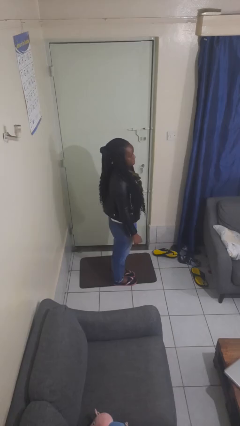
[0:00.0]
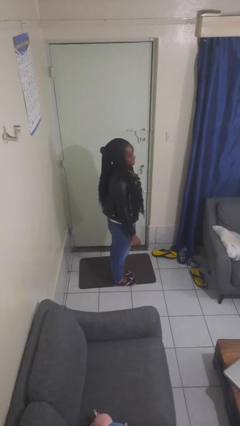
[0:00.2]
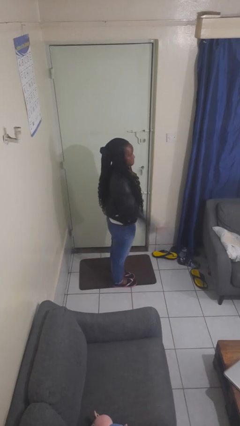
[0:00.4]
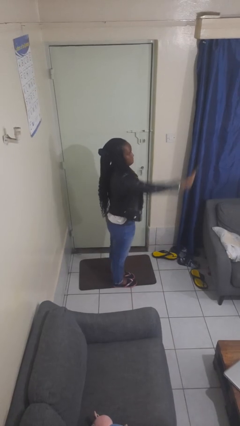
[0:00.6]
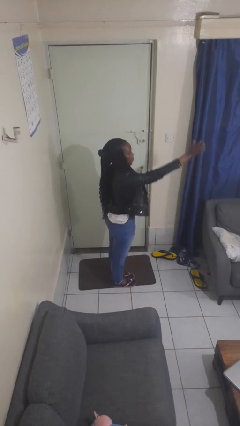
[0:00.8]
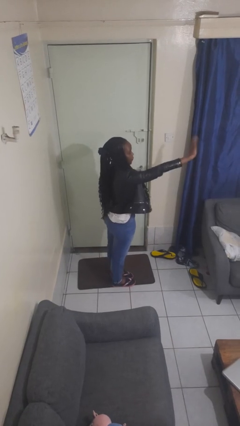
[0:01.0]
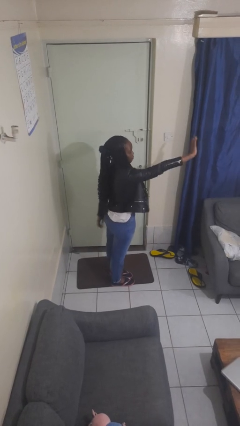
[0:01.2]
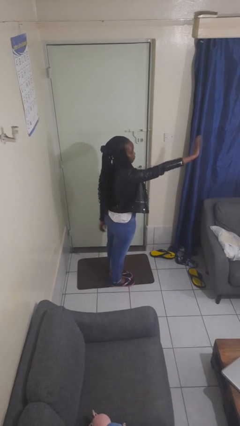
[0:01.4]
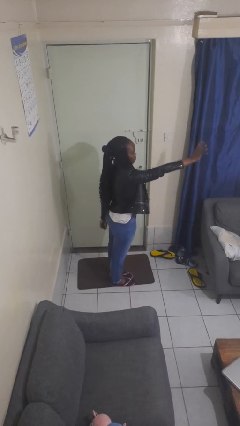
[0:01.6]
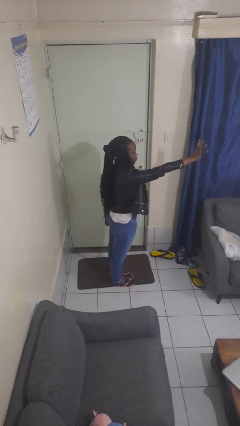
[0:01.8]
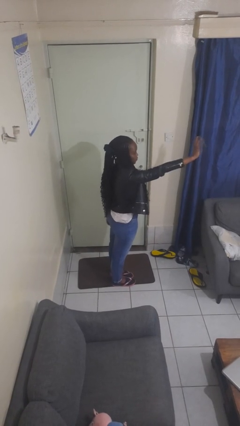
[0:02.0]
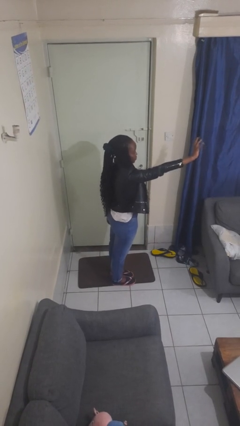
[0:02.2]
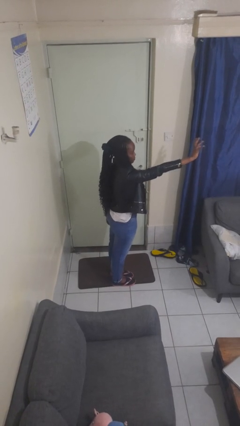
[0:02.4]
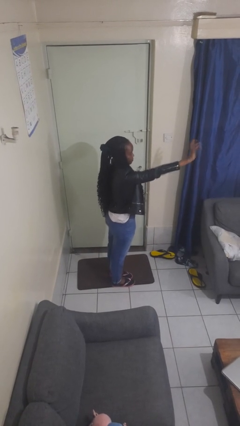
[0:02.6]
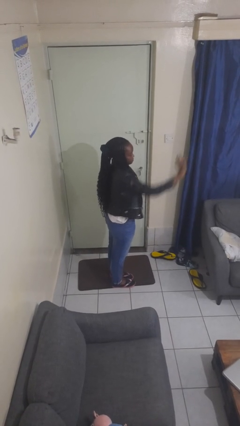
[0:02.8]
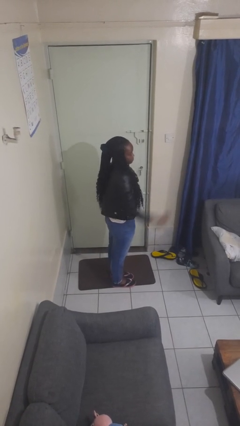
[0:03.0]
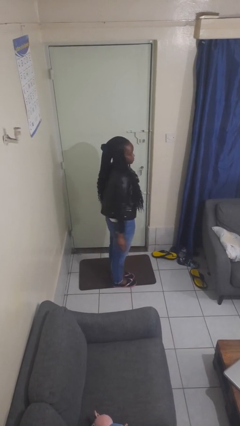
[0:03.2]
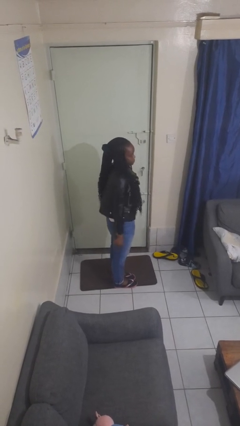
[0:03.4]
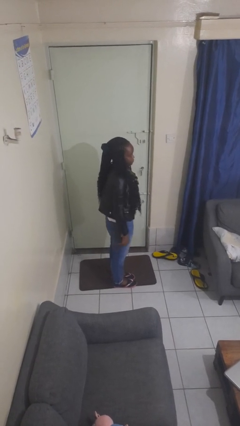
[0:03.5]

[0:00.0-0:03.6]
person waves at person

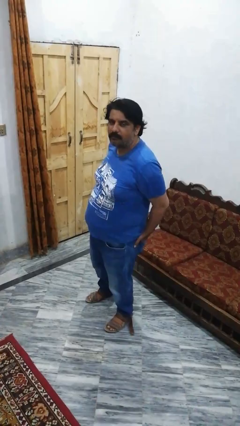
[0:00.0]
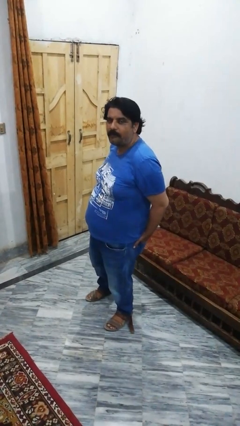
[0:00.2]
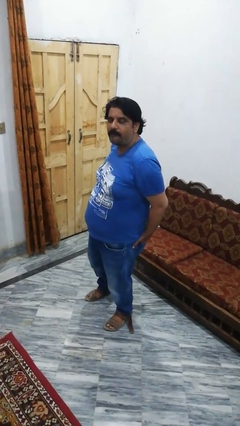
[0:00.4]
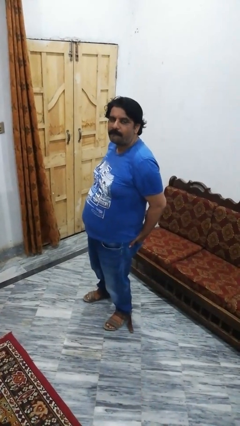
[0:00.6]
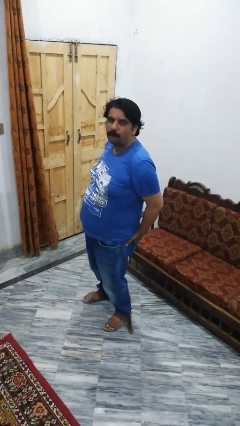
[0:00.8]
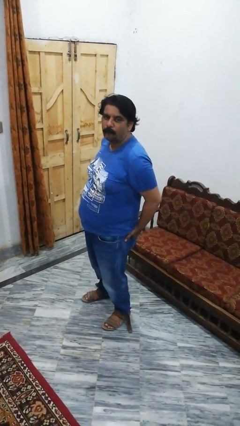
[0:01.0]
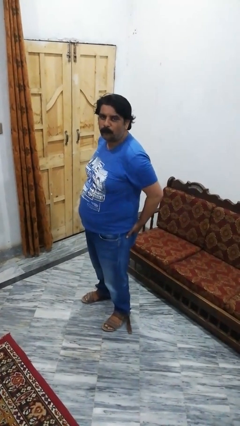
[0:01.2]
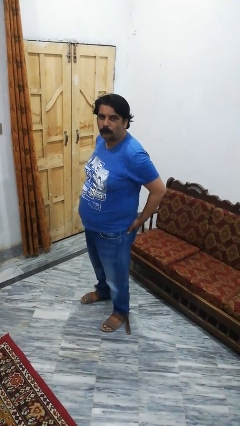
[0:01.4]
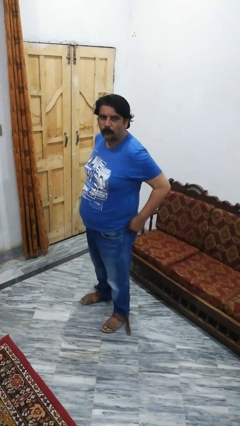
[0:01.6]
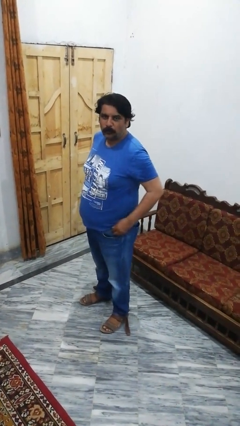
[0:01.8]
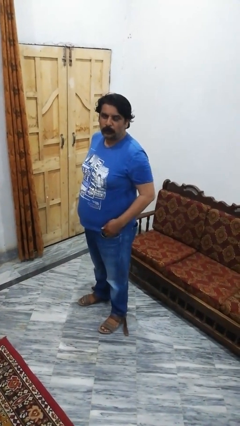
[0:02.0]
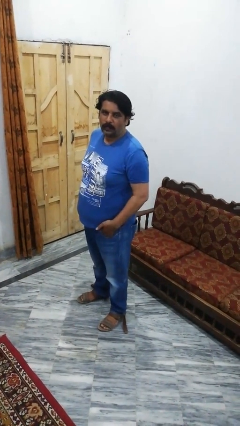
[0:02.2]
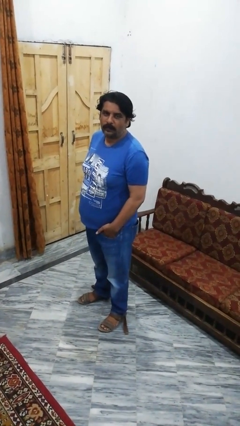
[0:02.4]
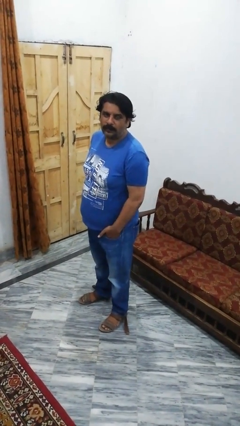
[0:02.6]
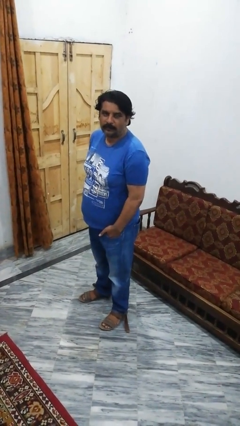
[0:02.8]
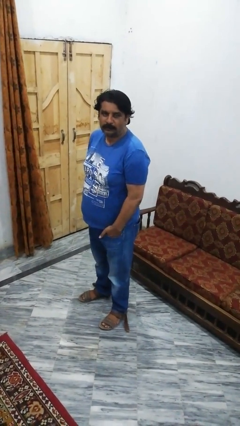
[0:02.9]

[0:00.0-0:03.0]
person puts hands in back pockets

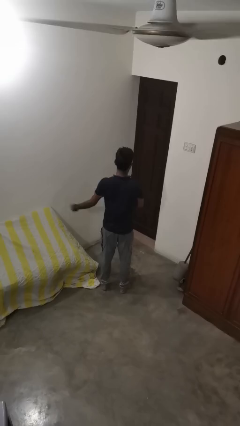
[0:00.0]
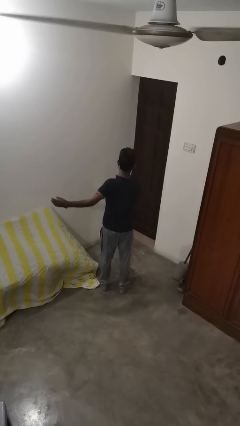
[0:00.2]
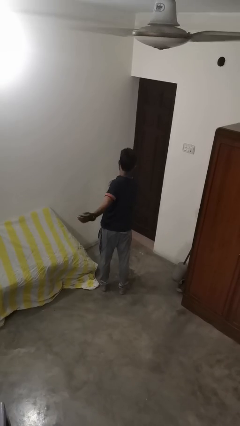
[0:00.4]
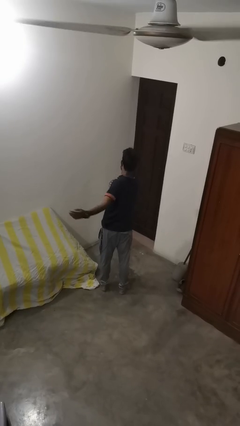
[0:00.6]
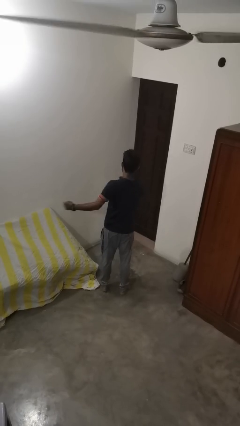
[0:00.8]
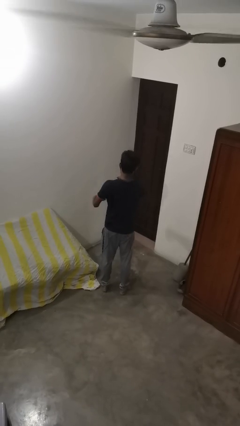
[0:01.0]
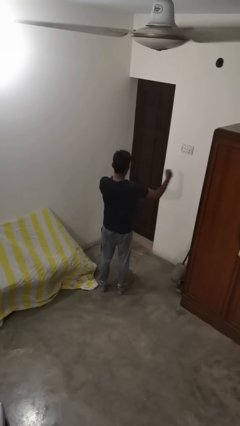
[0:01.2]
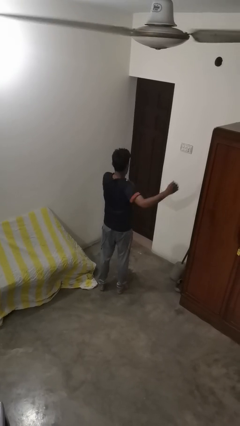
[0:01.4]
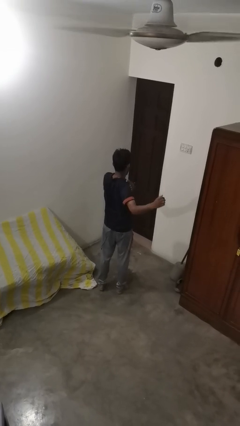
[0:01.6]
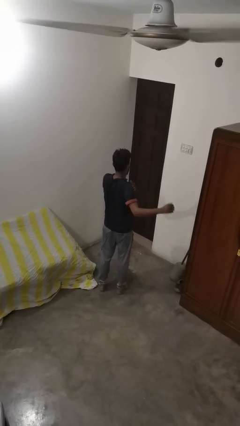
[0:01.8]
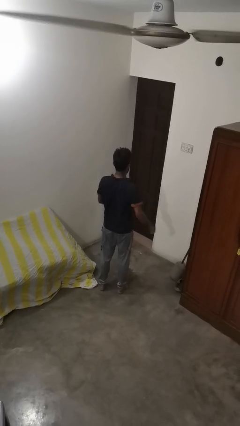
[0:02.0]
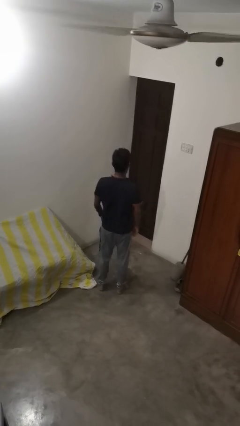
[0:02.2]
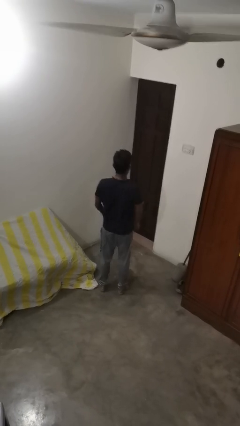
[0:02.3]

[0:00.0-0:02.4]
person stretches arms to side

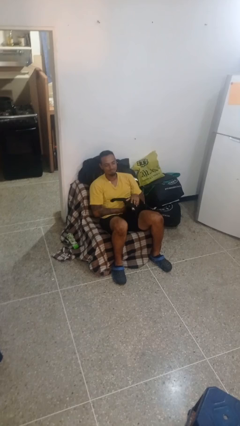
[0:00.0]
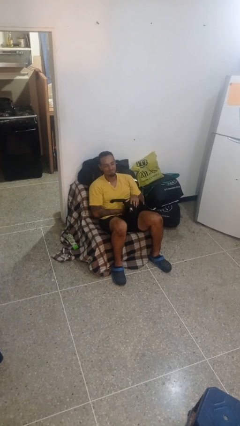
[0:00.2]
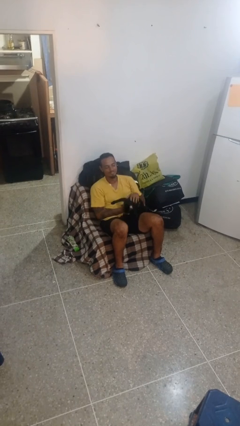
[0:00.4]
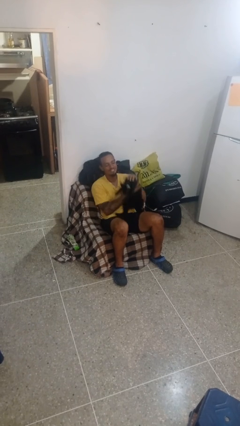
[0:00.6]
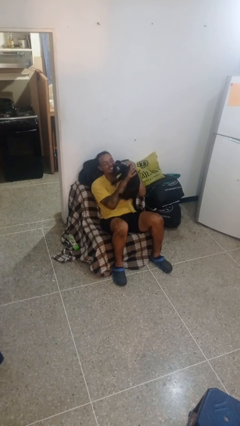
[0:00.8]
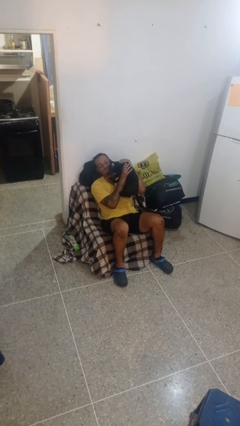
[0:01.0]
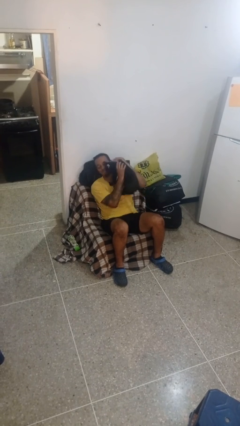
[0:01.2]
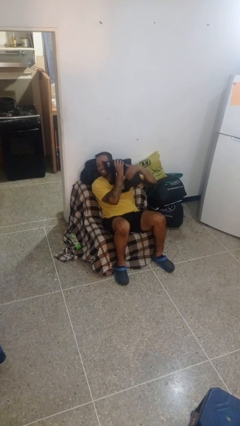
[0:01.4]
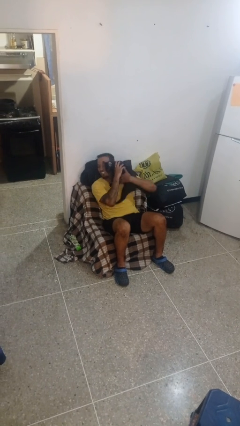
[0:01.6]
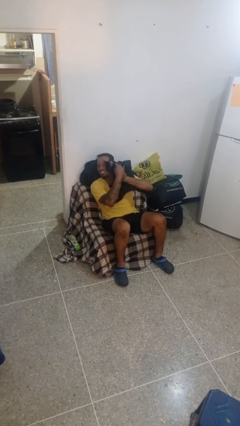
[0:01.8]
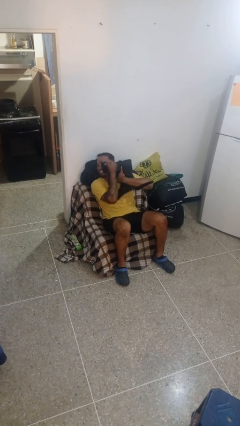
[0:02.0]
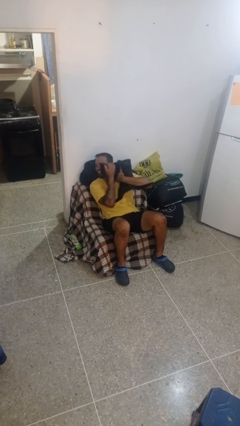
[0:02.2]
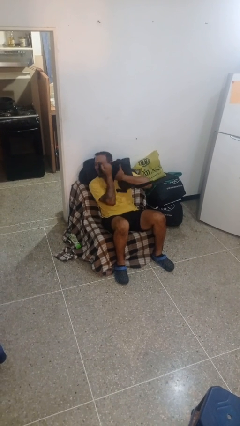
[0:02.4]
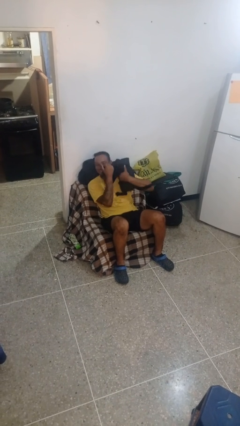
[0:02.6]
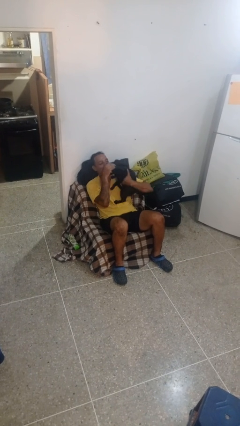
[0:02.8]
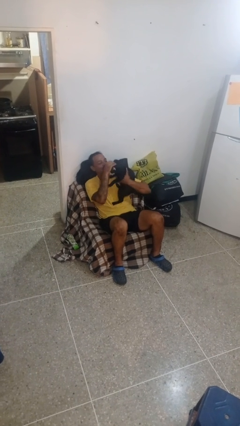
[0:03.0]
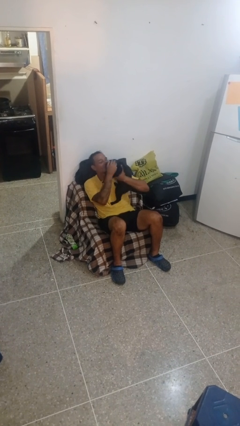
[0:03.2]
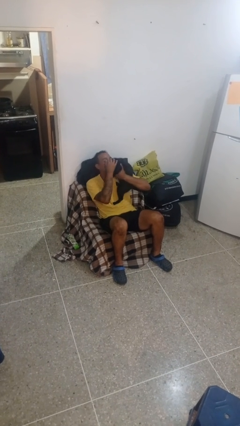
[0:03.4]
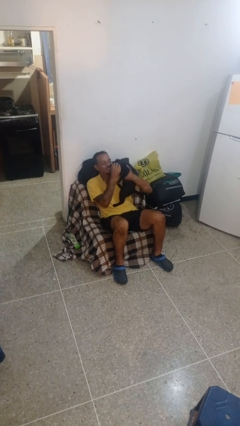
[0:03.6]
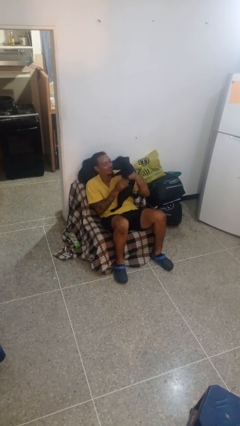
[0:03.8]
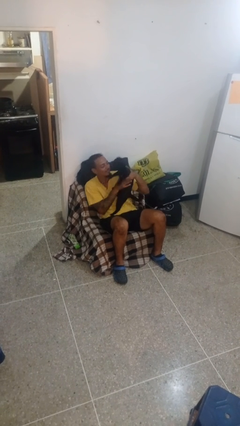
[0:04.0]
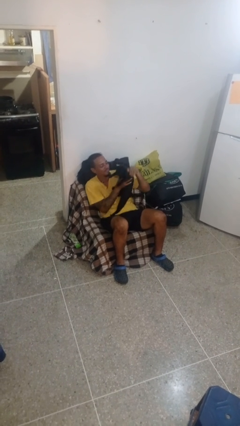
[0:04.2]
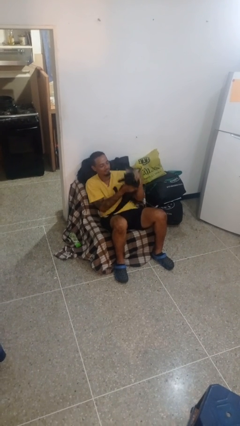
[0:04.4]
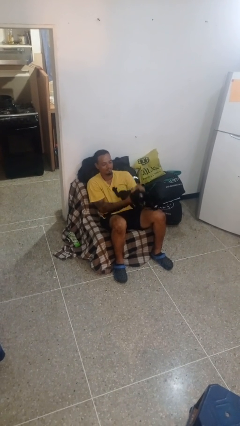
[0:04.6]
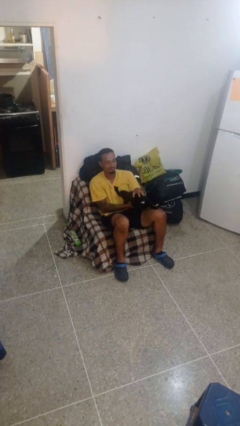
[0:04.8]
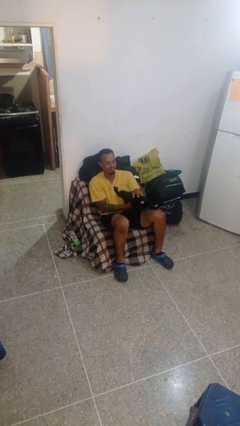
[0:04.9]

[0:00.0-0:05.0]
person hugs cat

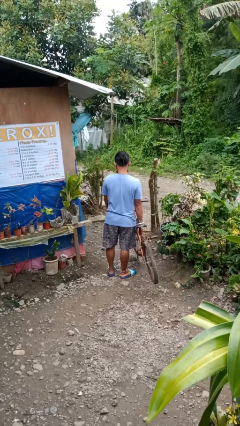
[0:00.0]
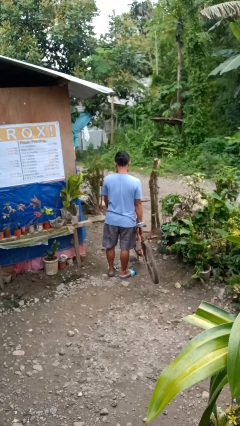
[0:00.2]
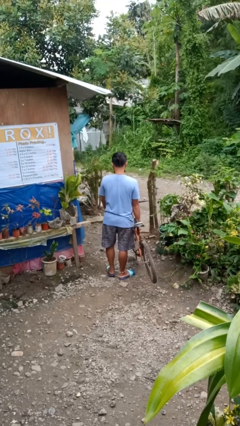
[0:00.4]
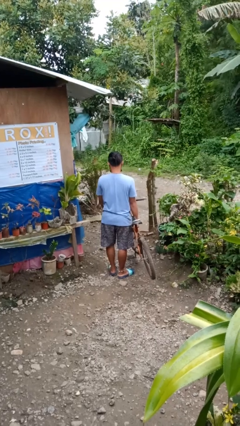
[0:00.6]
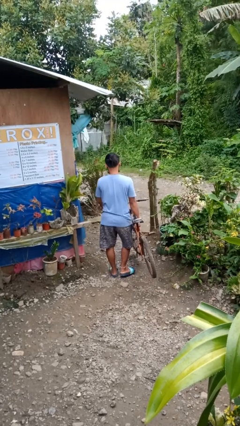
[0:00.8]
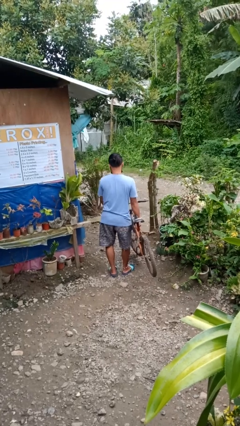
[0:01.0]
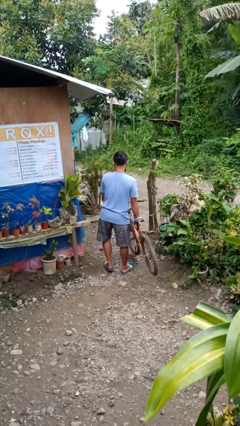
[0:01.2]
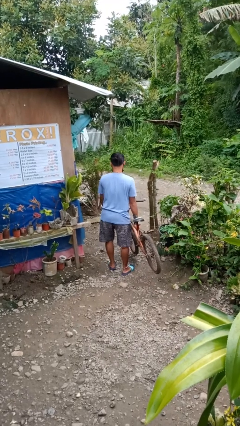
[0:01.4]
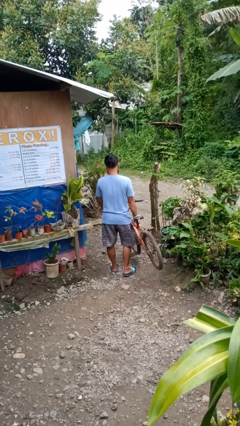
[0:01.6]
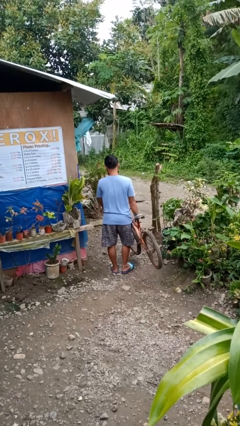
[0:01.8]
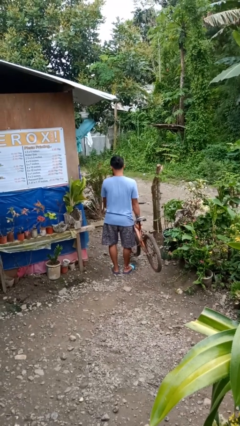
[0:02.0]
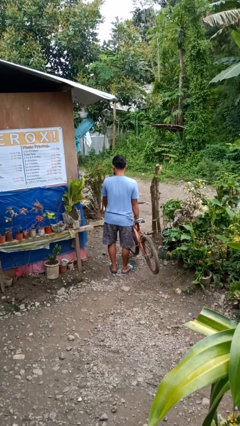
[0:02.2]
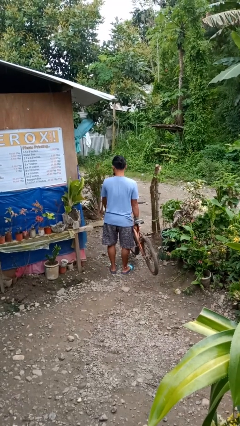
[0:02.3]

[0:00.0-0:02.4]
person carries bicycle

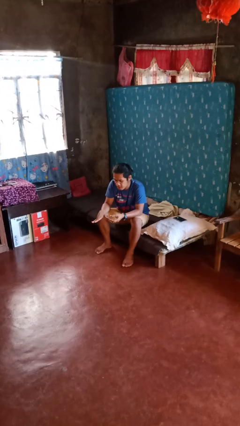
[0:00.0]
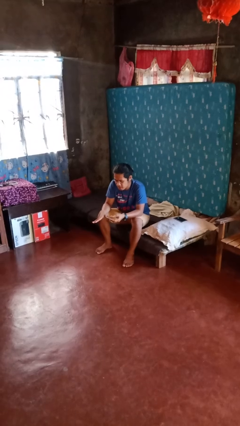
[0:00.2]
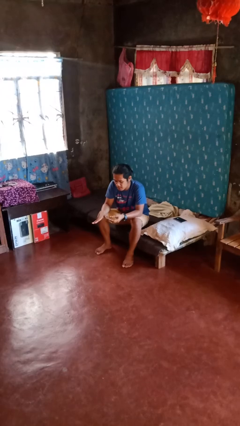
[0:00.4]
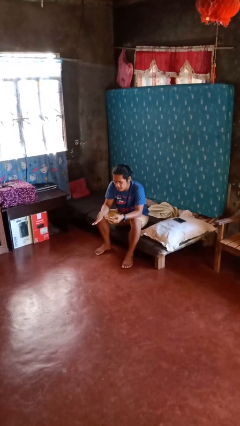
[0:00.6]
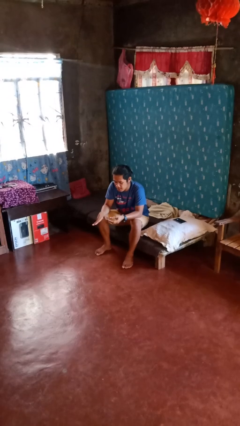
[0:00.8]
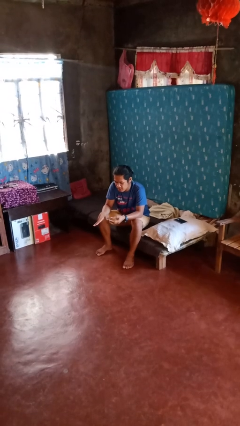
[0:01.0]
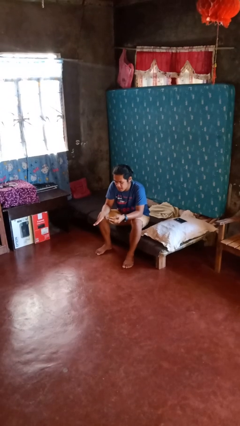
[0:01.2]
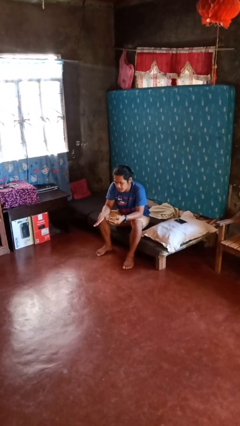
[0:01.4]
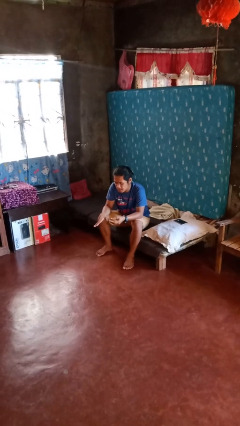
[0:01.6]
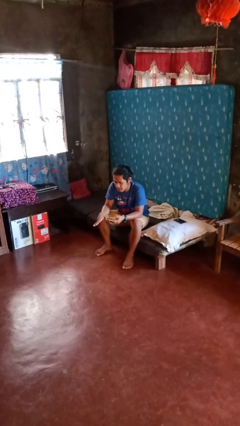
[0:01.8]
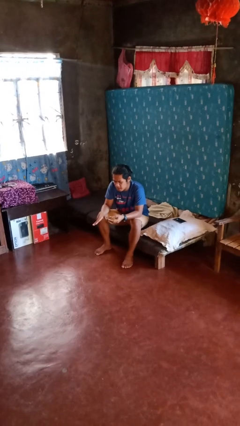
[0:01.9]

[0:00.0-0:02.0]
person clips fingernails
